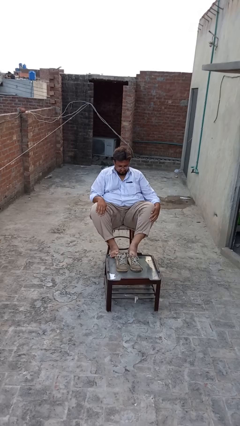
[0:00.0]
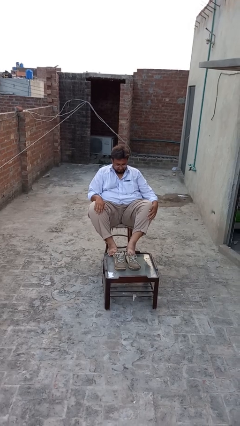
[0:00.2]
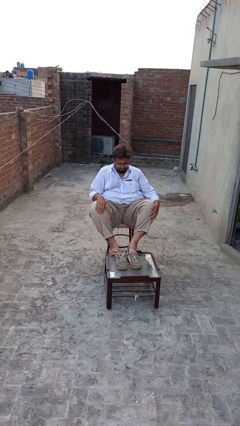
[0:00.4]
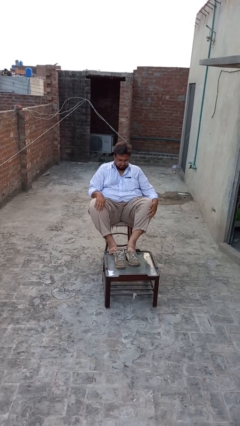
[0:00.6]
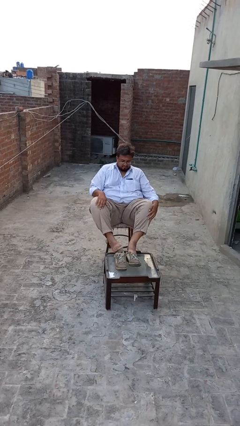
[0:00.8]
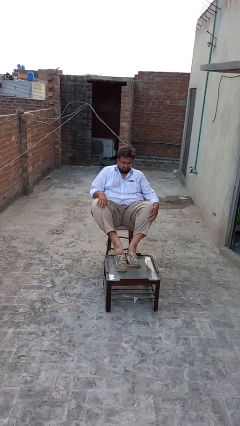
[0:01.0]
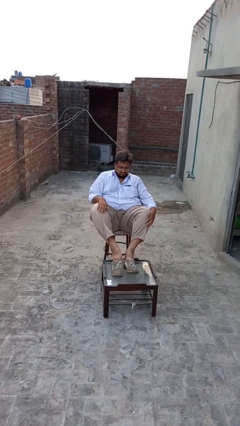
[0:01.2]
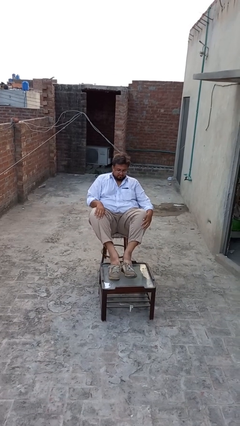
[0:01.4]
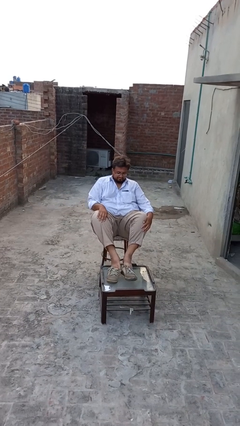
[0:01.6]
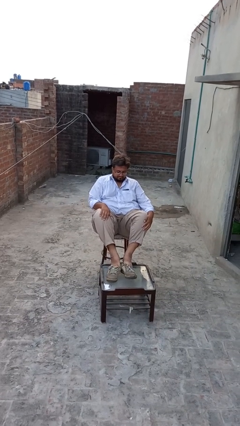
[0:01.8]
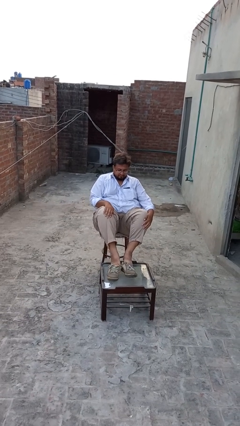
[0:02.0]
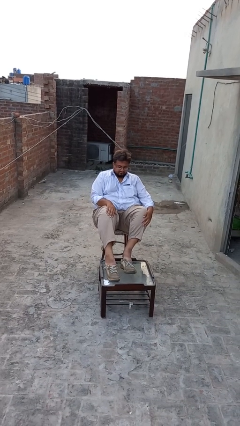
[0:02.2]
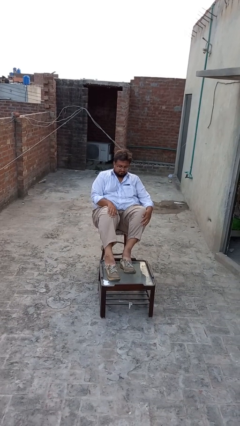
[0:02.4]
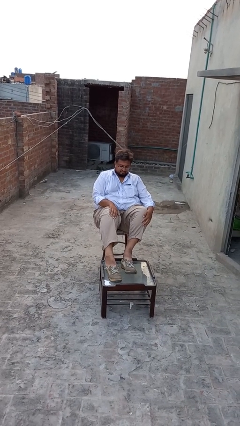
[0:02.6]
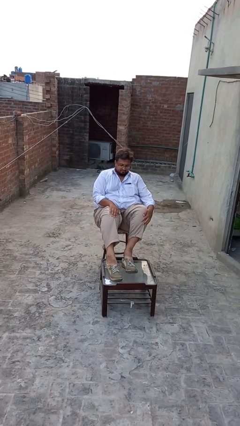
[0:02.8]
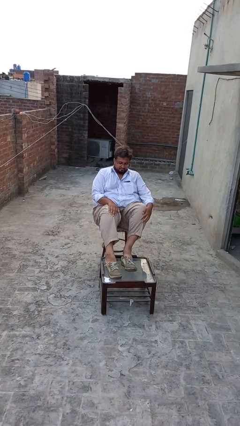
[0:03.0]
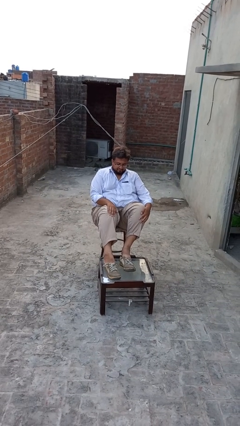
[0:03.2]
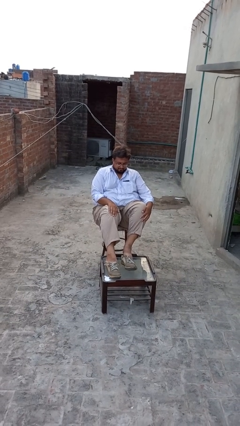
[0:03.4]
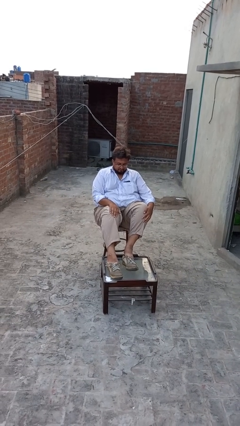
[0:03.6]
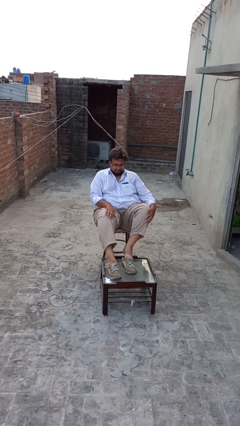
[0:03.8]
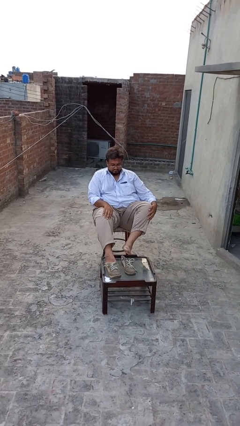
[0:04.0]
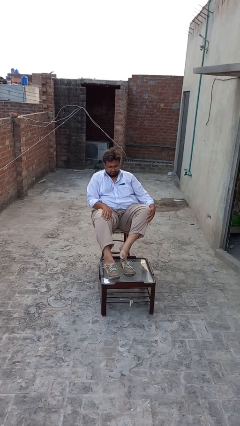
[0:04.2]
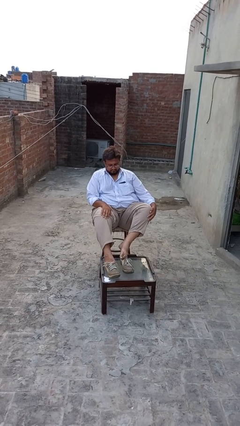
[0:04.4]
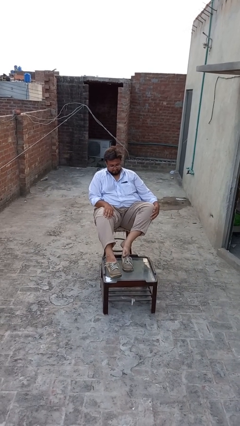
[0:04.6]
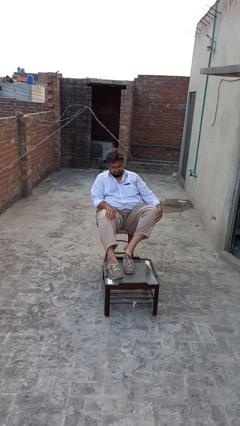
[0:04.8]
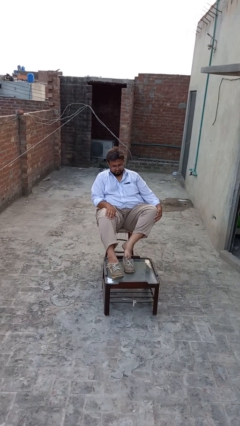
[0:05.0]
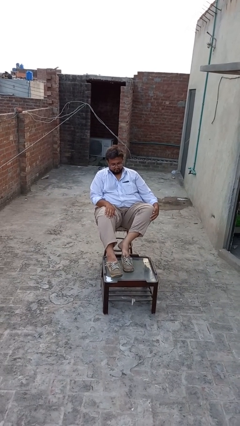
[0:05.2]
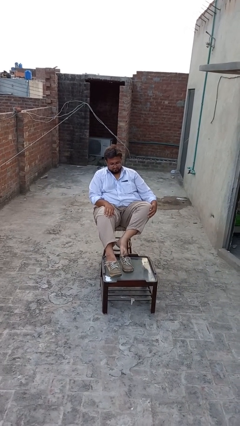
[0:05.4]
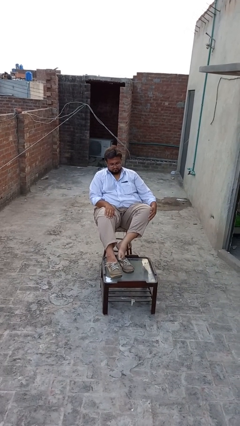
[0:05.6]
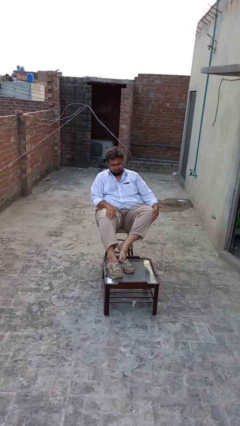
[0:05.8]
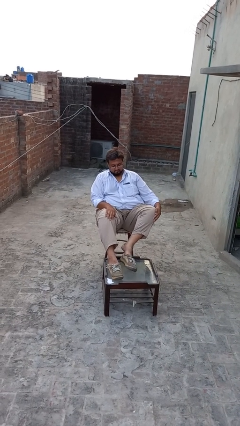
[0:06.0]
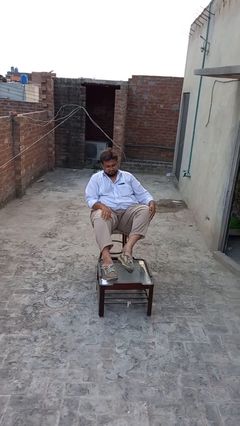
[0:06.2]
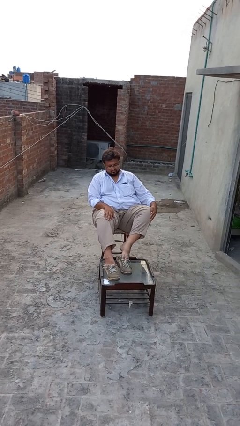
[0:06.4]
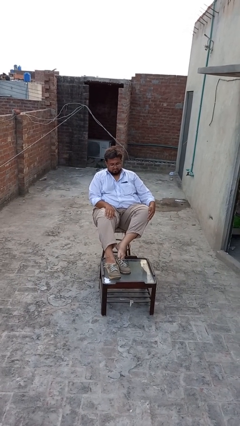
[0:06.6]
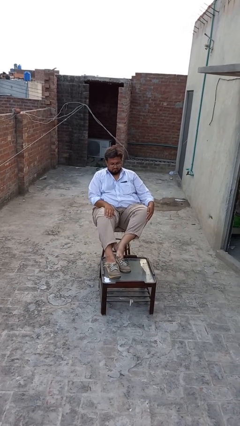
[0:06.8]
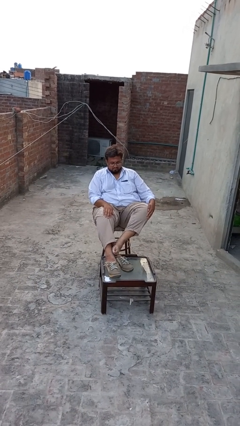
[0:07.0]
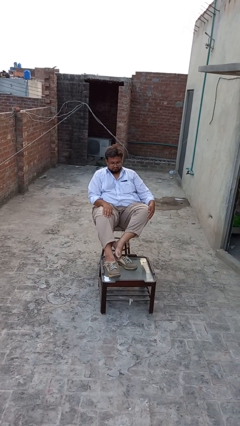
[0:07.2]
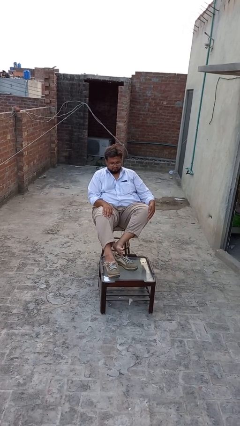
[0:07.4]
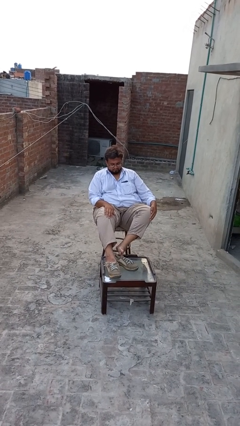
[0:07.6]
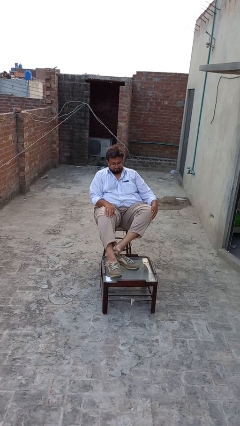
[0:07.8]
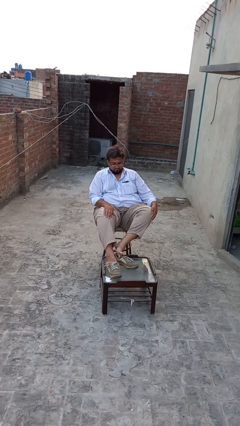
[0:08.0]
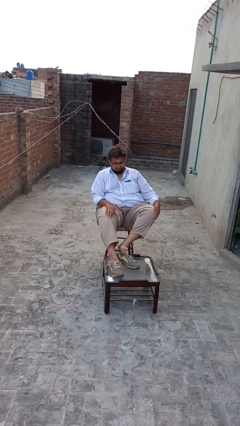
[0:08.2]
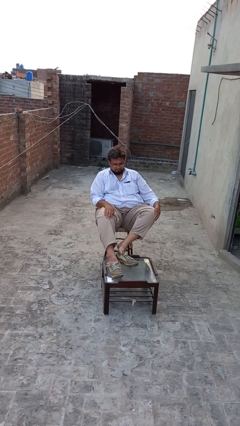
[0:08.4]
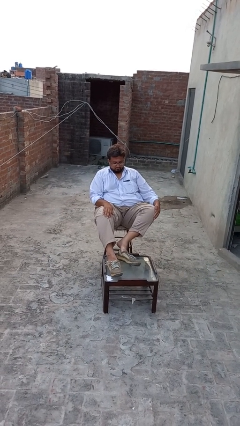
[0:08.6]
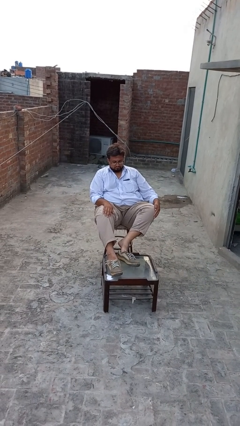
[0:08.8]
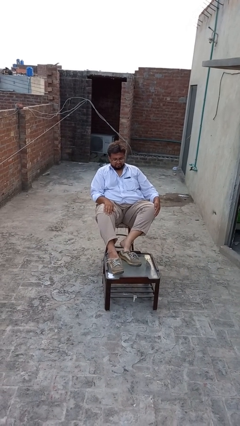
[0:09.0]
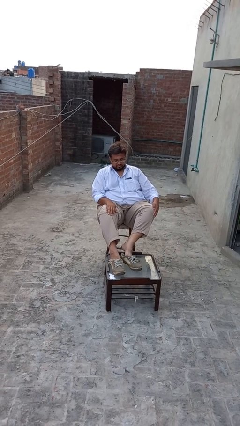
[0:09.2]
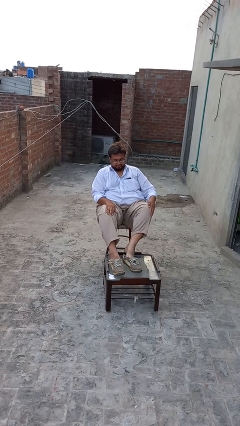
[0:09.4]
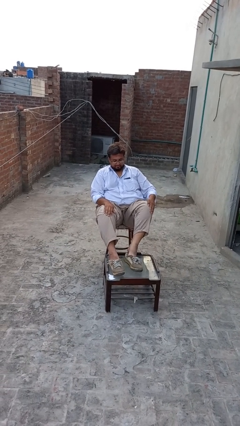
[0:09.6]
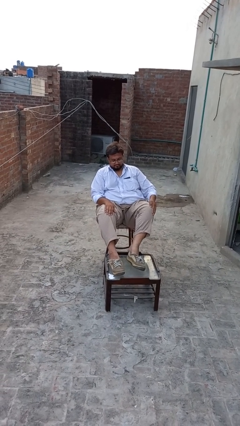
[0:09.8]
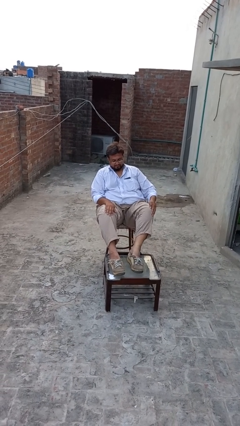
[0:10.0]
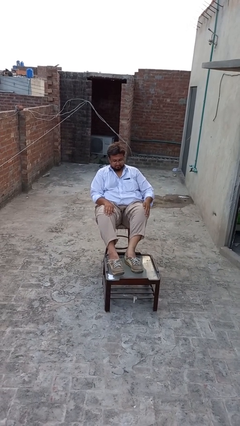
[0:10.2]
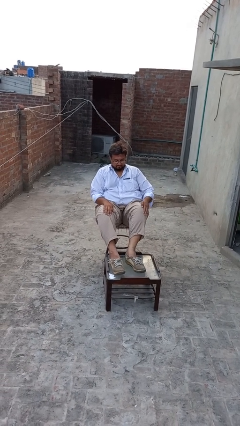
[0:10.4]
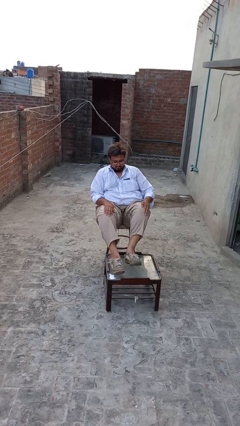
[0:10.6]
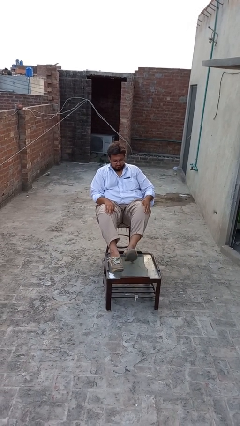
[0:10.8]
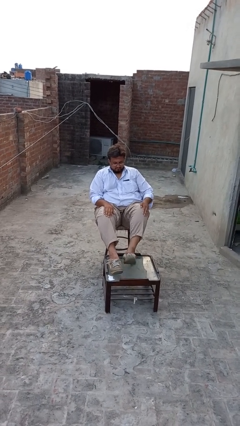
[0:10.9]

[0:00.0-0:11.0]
person puts on shoes

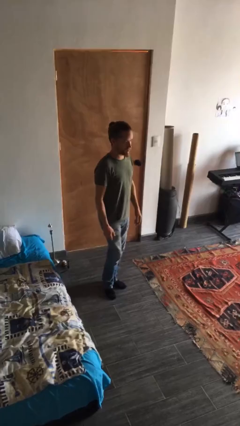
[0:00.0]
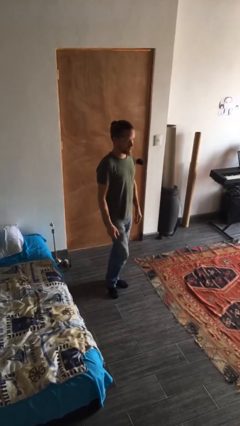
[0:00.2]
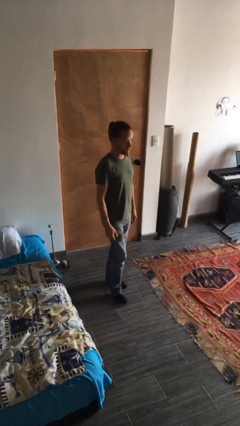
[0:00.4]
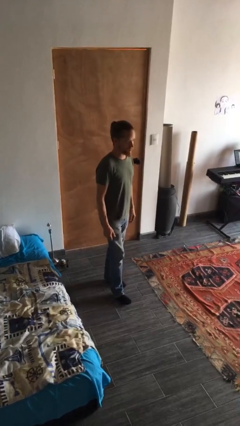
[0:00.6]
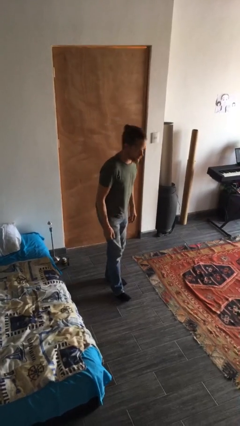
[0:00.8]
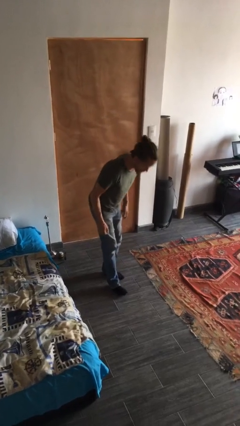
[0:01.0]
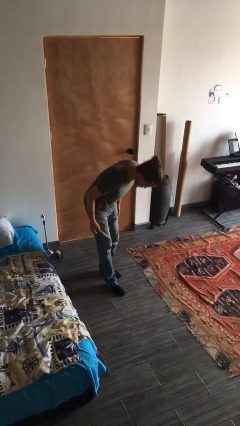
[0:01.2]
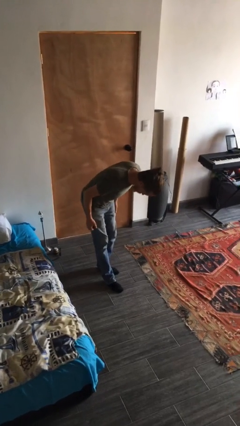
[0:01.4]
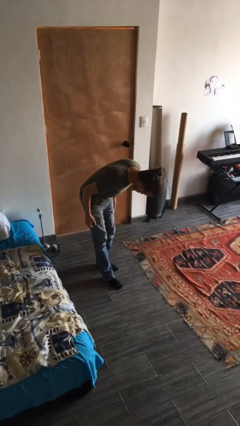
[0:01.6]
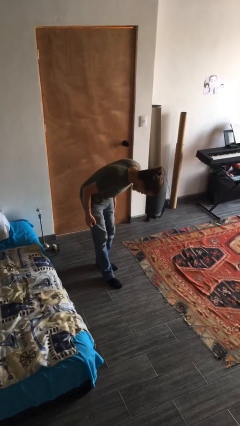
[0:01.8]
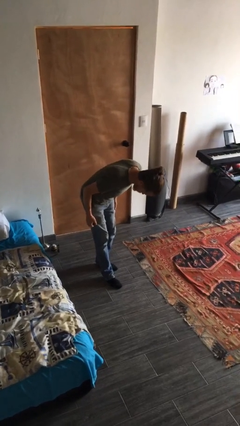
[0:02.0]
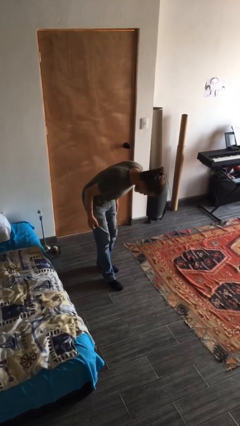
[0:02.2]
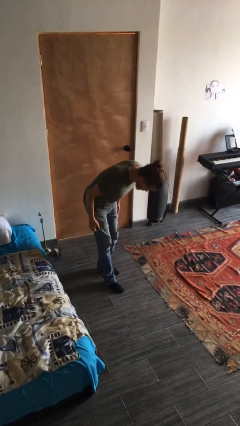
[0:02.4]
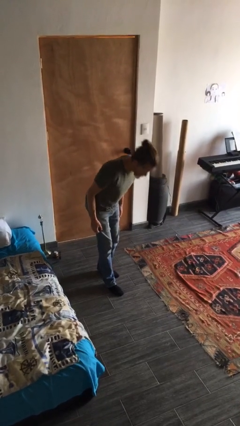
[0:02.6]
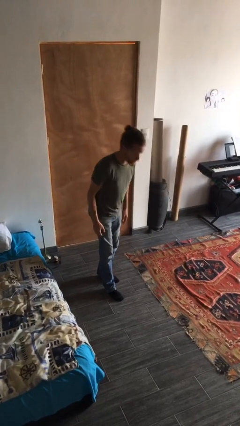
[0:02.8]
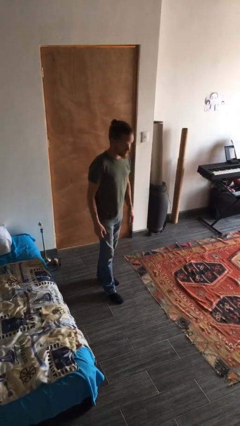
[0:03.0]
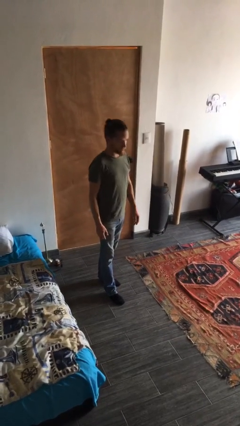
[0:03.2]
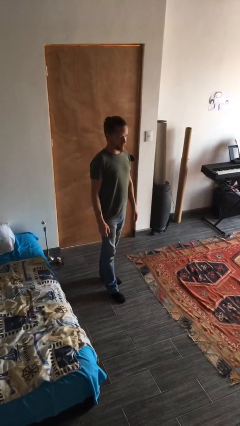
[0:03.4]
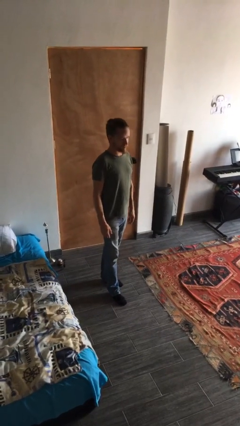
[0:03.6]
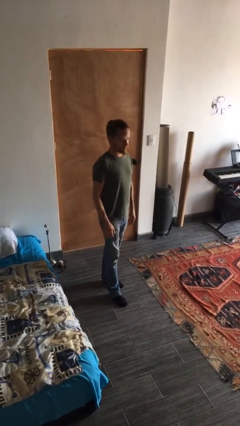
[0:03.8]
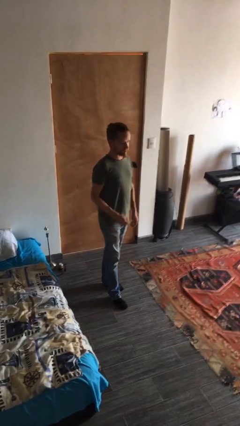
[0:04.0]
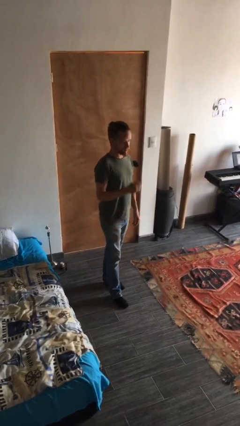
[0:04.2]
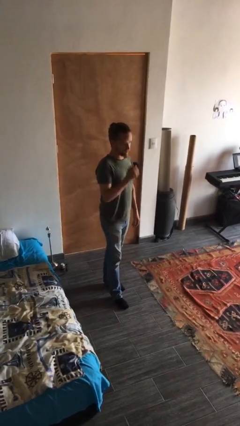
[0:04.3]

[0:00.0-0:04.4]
person bows

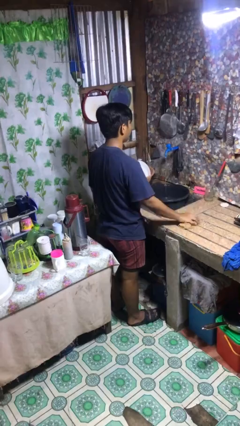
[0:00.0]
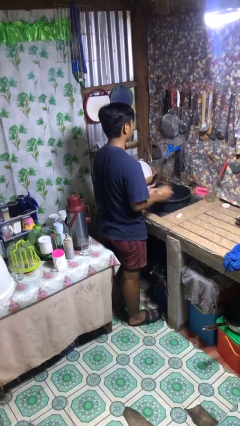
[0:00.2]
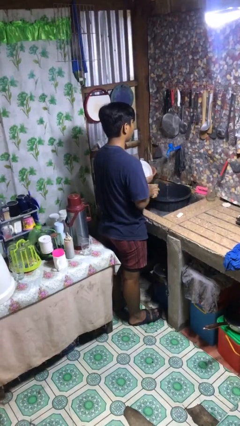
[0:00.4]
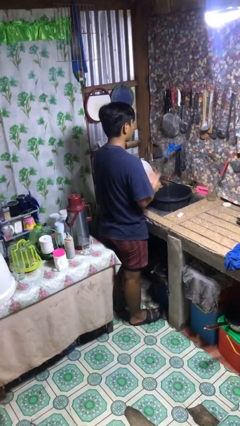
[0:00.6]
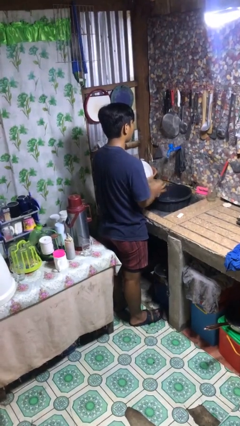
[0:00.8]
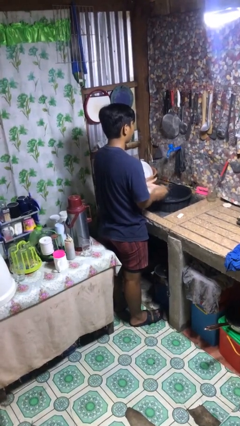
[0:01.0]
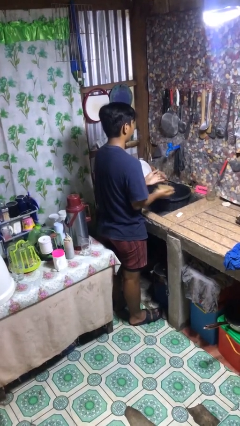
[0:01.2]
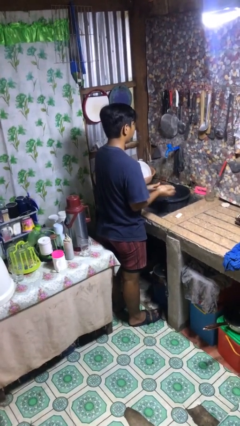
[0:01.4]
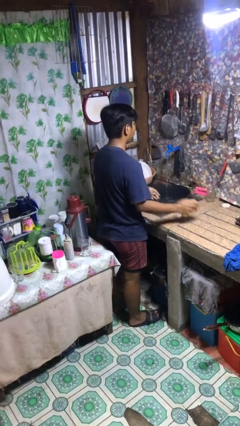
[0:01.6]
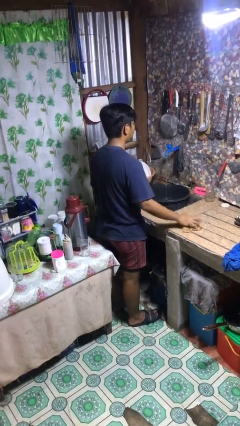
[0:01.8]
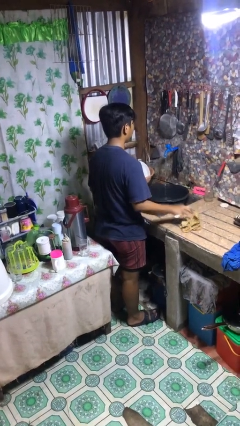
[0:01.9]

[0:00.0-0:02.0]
person dries hands with towel

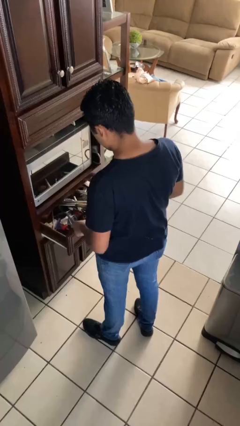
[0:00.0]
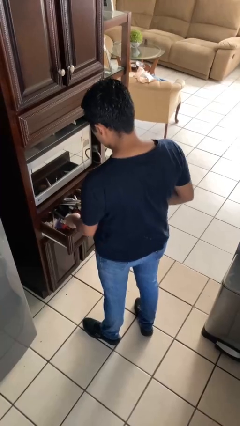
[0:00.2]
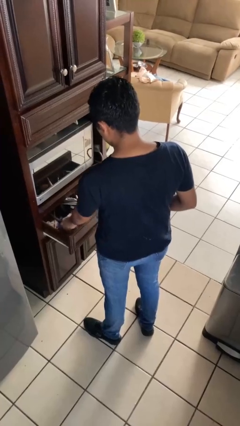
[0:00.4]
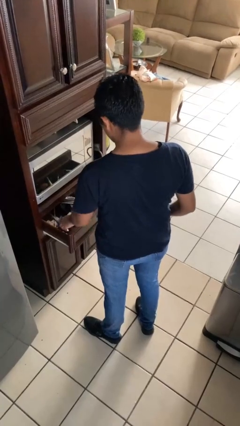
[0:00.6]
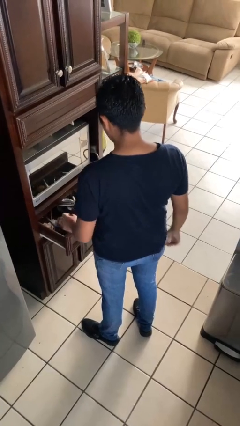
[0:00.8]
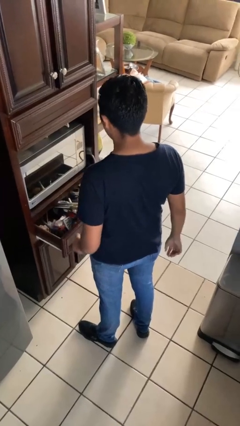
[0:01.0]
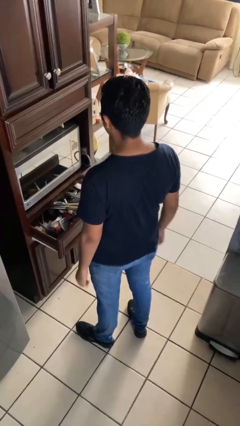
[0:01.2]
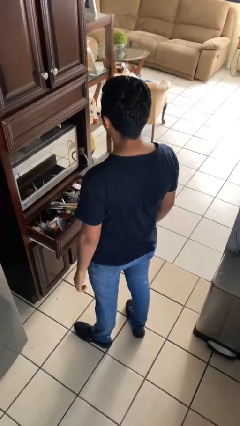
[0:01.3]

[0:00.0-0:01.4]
person puts object into kitchen drawer
